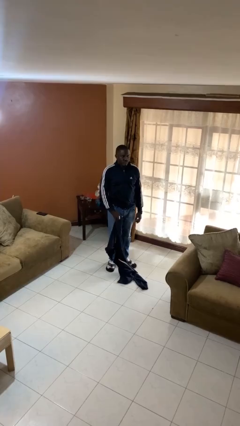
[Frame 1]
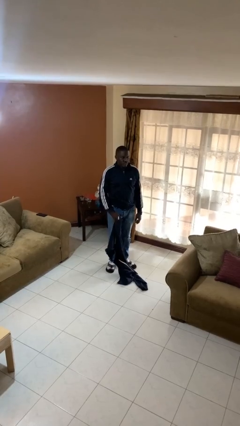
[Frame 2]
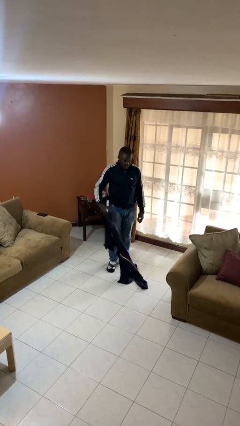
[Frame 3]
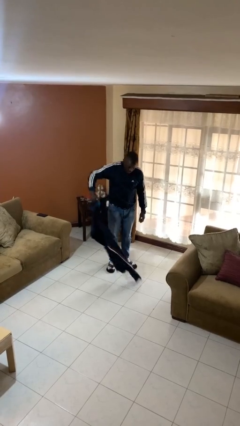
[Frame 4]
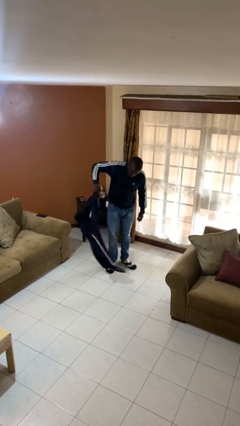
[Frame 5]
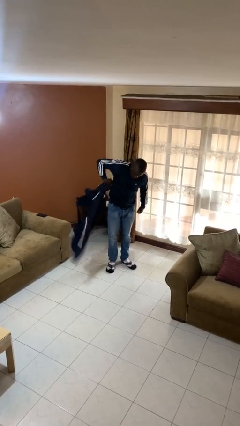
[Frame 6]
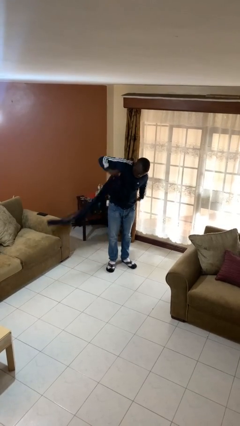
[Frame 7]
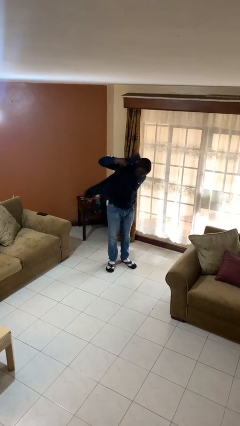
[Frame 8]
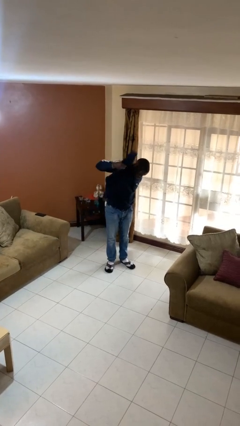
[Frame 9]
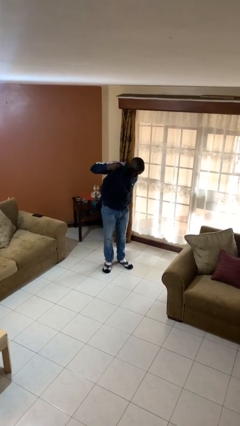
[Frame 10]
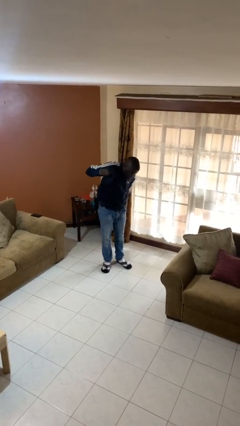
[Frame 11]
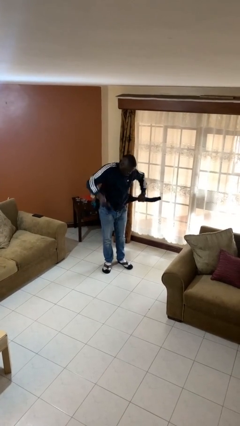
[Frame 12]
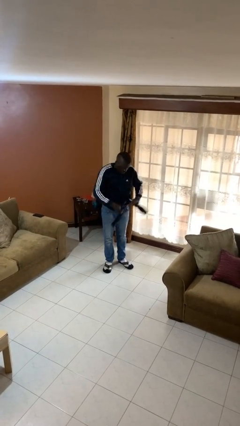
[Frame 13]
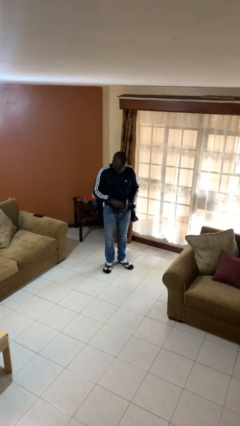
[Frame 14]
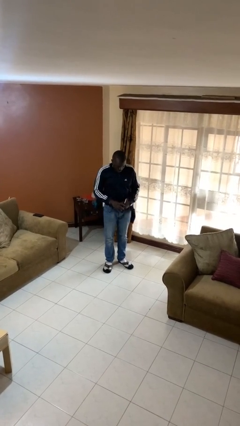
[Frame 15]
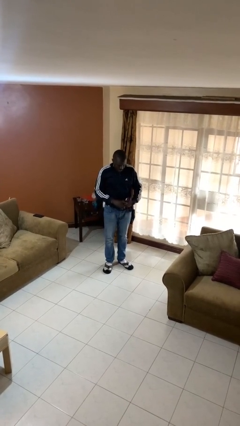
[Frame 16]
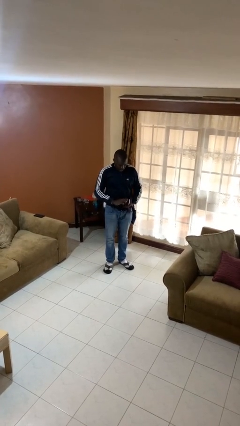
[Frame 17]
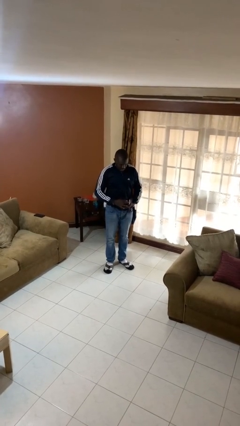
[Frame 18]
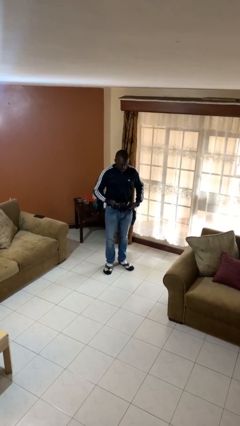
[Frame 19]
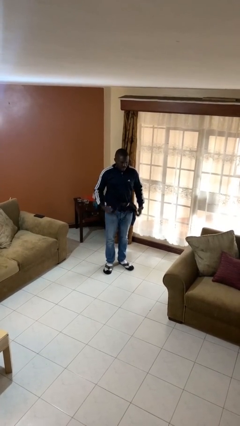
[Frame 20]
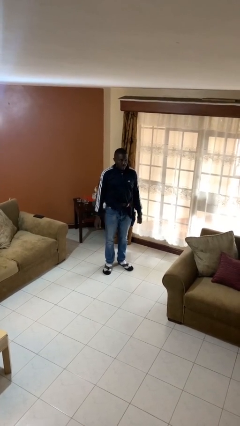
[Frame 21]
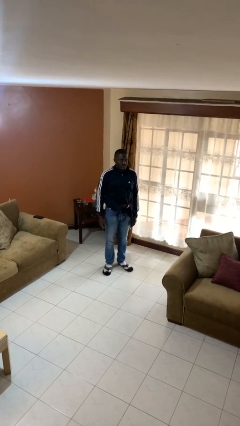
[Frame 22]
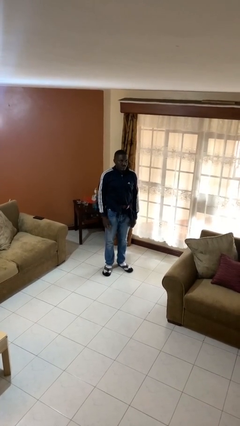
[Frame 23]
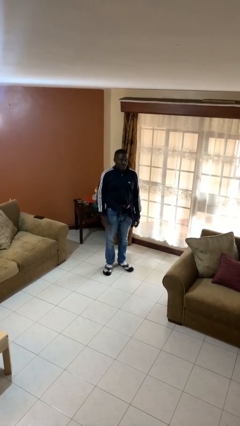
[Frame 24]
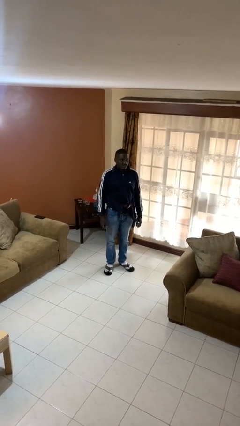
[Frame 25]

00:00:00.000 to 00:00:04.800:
person ties jacket around waist

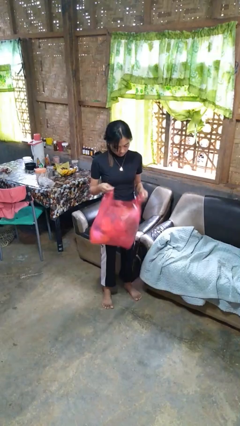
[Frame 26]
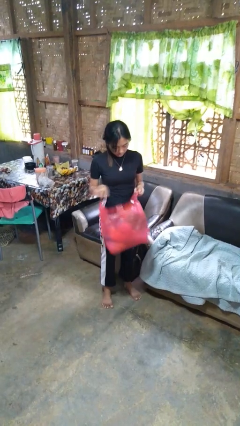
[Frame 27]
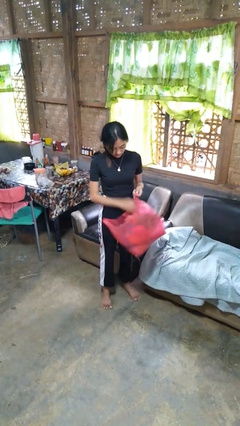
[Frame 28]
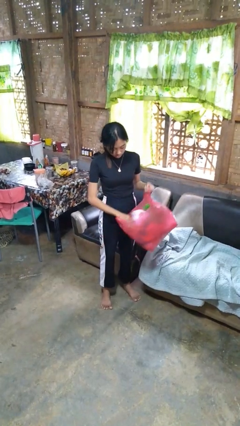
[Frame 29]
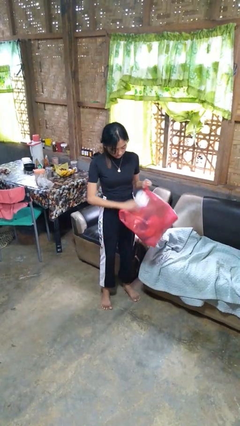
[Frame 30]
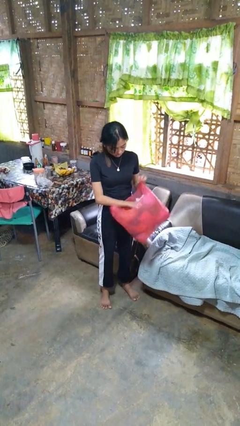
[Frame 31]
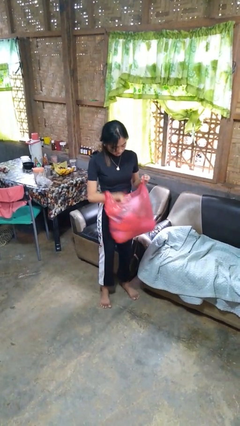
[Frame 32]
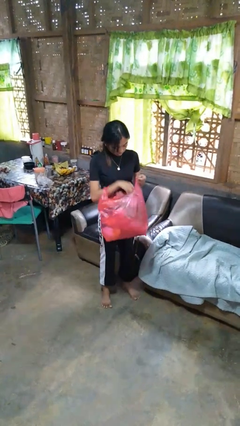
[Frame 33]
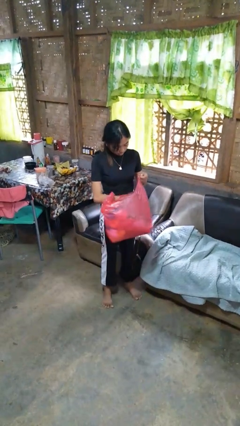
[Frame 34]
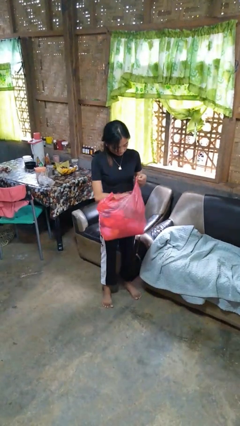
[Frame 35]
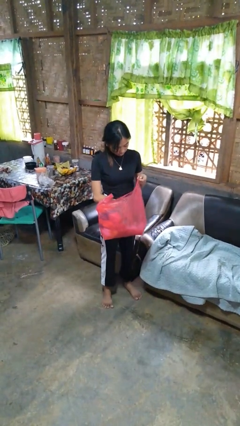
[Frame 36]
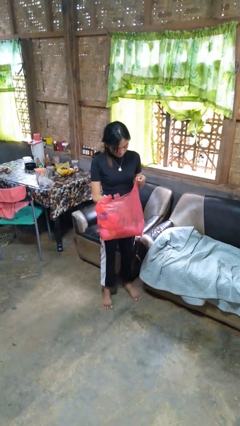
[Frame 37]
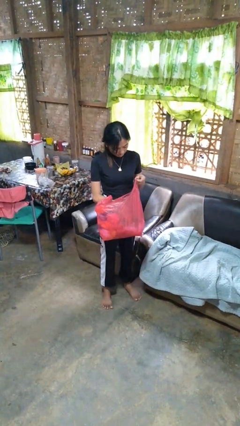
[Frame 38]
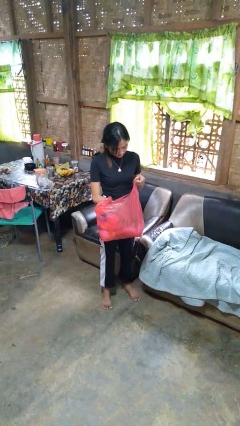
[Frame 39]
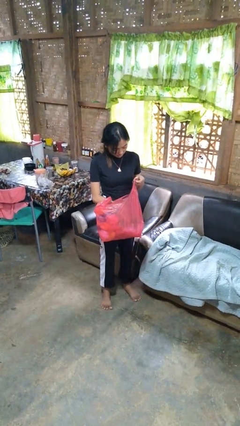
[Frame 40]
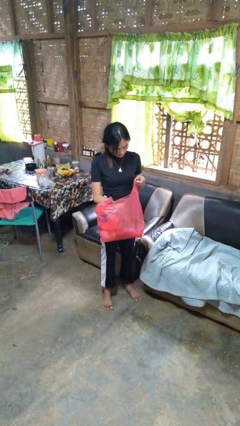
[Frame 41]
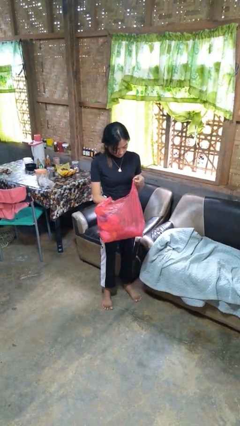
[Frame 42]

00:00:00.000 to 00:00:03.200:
person searches in bag

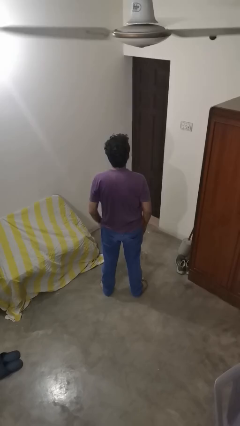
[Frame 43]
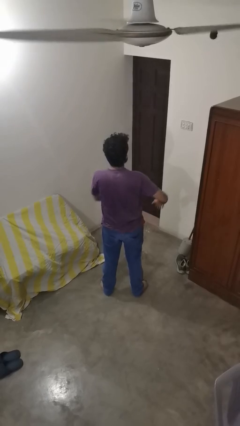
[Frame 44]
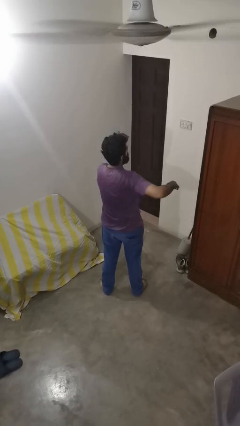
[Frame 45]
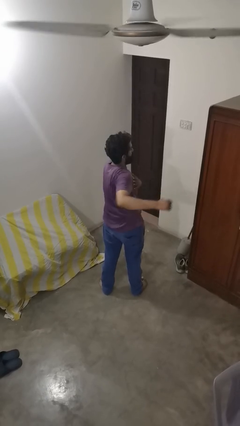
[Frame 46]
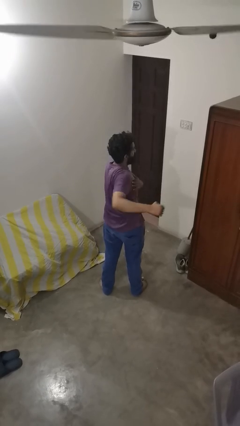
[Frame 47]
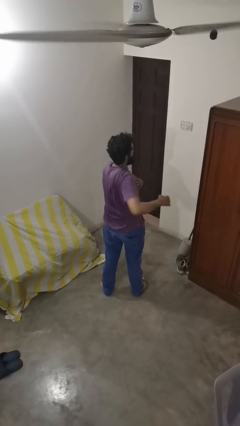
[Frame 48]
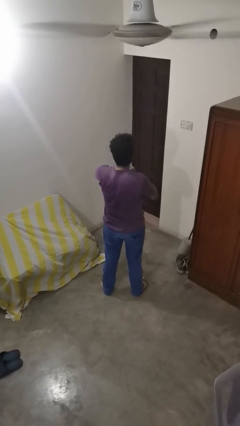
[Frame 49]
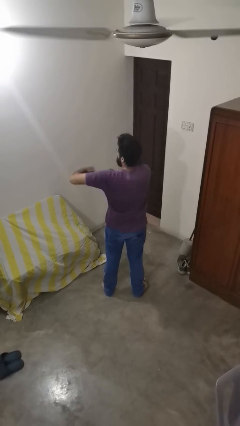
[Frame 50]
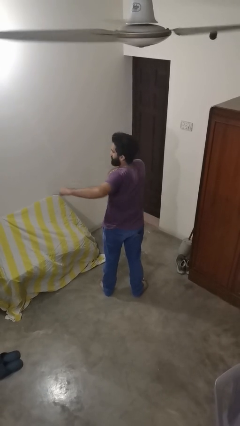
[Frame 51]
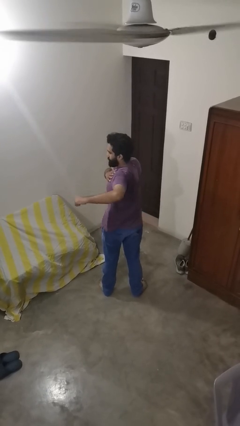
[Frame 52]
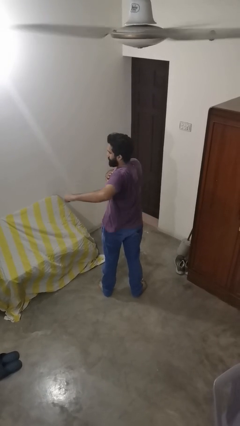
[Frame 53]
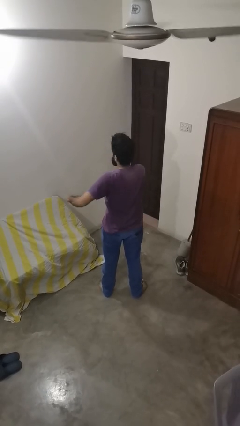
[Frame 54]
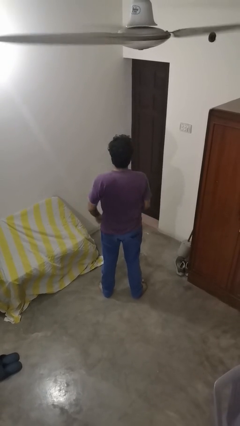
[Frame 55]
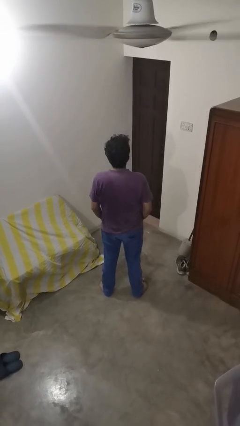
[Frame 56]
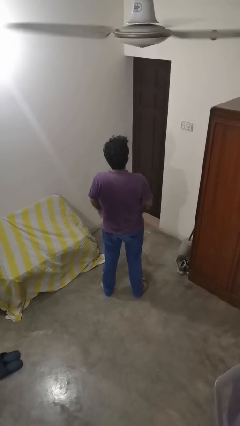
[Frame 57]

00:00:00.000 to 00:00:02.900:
person stretches arms to side

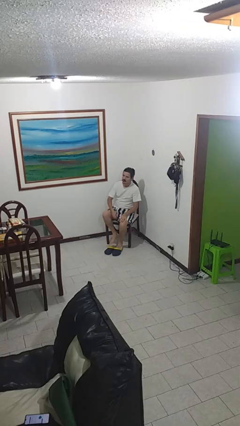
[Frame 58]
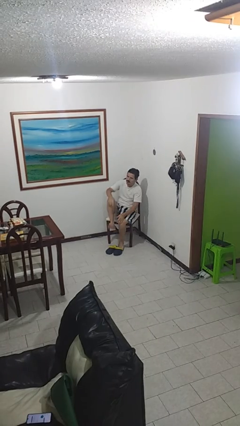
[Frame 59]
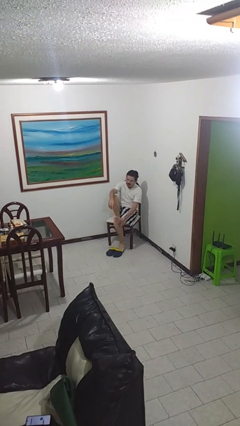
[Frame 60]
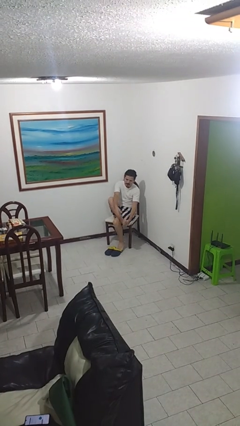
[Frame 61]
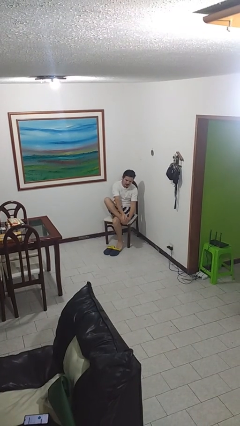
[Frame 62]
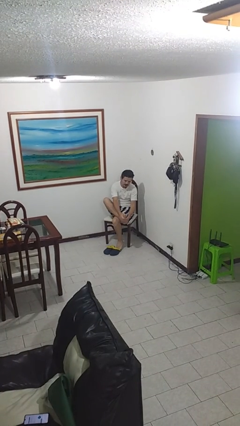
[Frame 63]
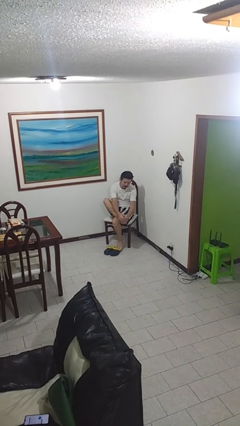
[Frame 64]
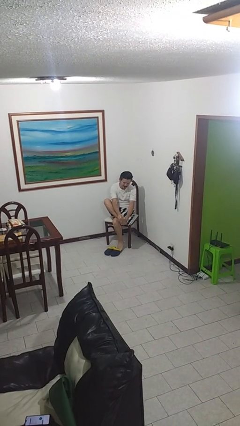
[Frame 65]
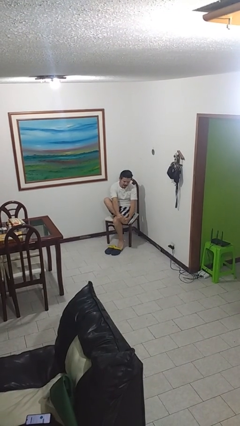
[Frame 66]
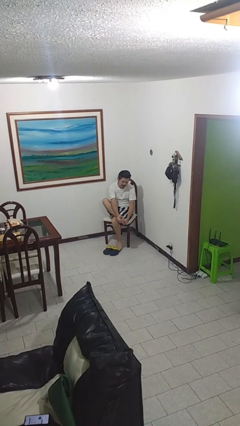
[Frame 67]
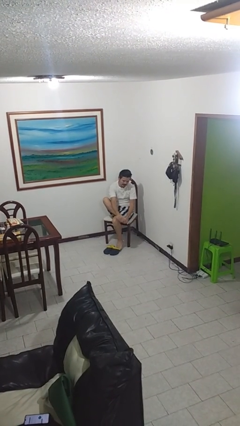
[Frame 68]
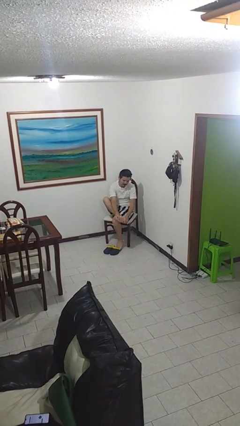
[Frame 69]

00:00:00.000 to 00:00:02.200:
person rubs foot

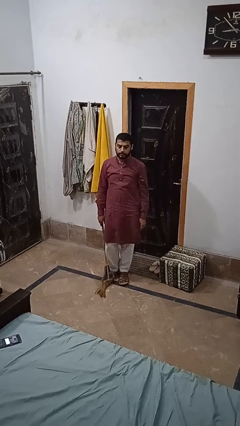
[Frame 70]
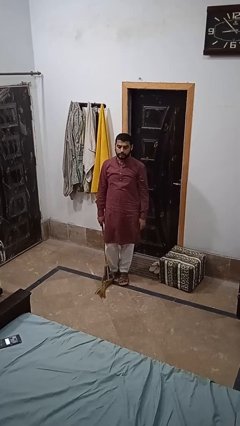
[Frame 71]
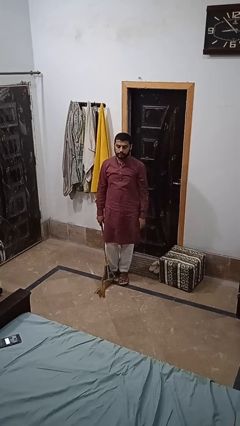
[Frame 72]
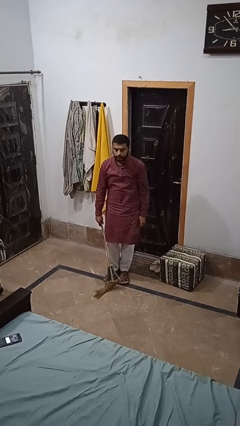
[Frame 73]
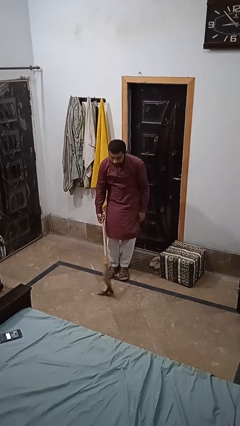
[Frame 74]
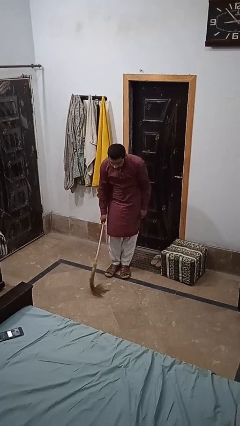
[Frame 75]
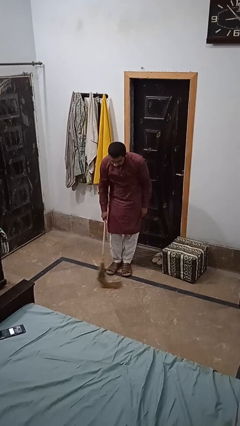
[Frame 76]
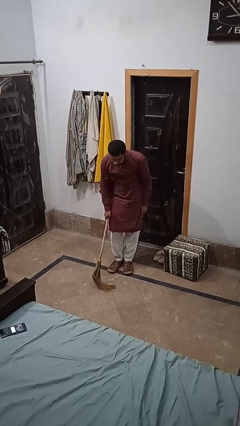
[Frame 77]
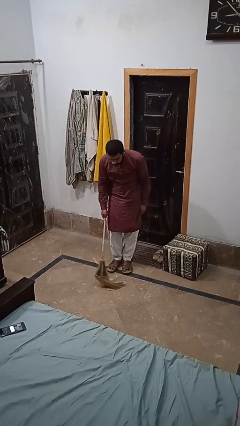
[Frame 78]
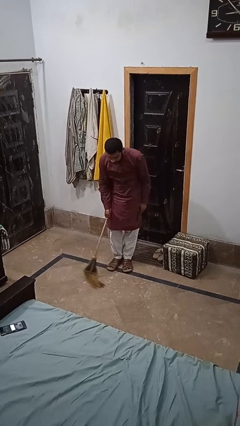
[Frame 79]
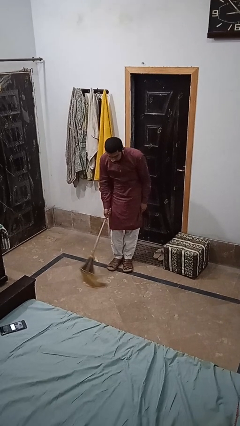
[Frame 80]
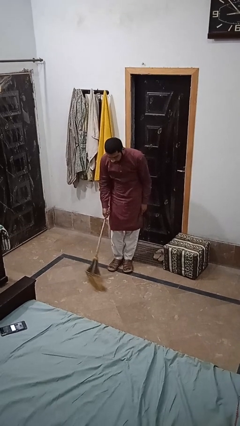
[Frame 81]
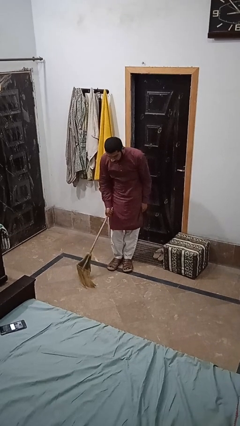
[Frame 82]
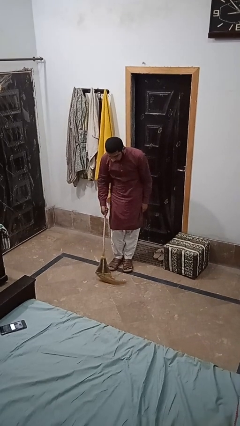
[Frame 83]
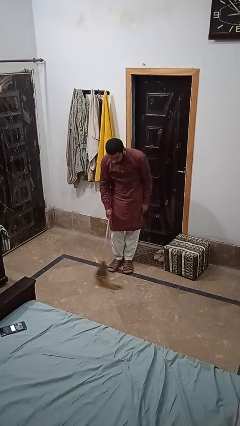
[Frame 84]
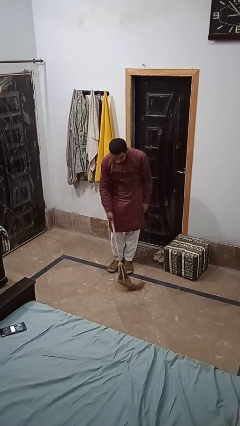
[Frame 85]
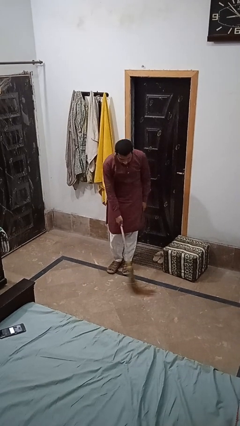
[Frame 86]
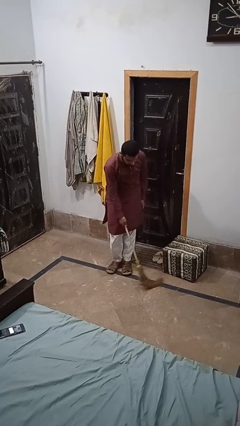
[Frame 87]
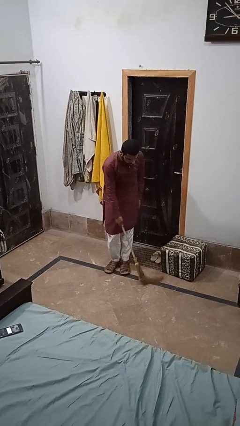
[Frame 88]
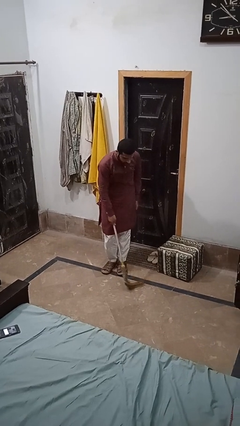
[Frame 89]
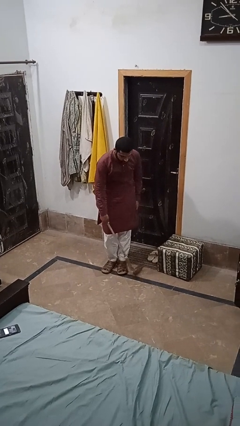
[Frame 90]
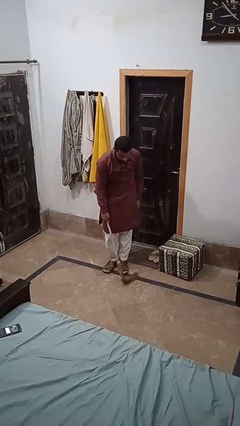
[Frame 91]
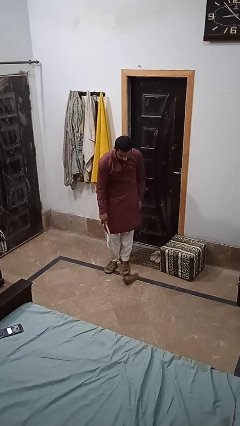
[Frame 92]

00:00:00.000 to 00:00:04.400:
person mops
